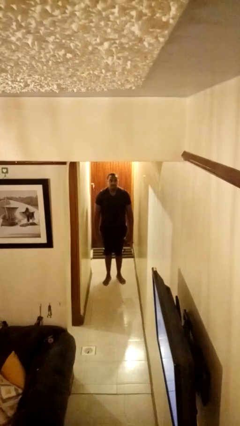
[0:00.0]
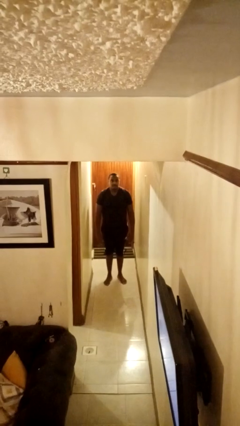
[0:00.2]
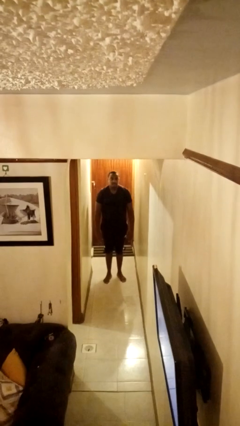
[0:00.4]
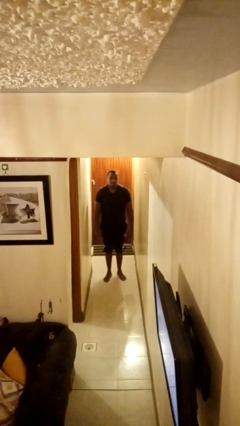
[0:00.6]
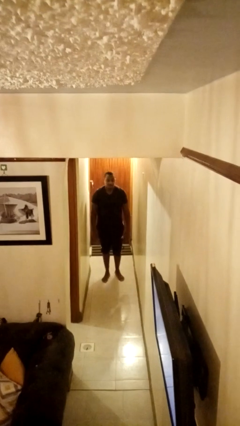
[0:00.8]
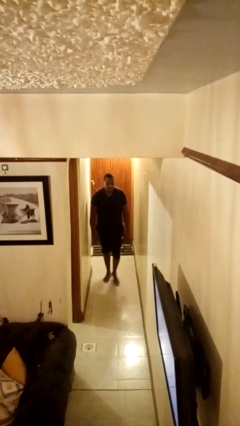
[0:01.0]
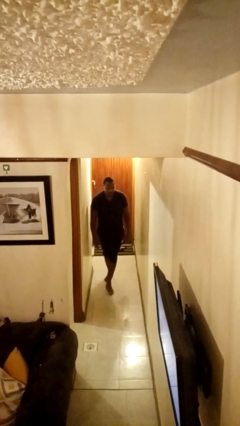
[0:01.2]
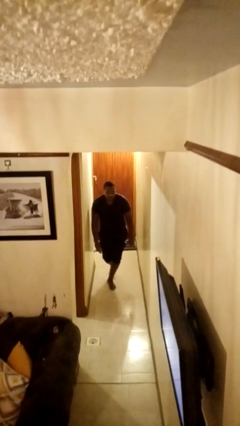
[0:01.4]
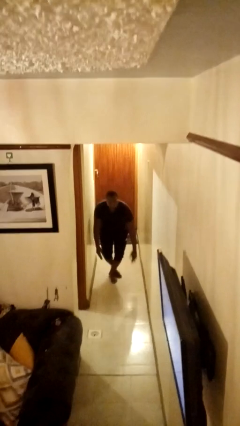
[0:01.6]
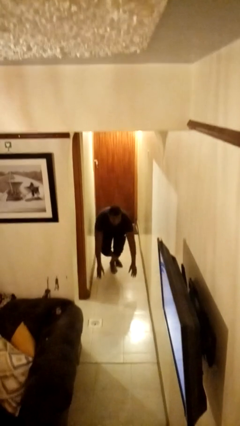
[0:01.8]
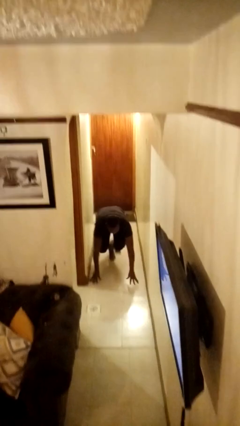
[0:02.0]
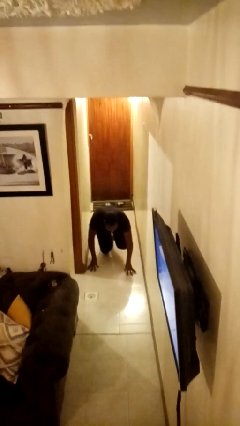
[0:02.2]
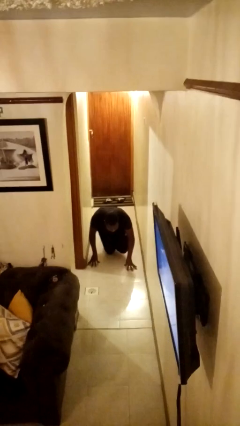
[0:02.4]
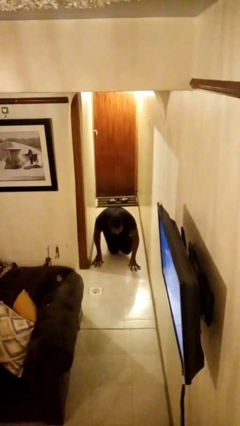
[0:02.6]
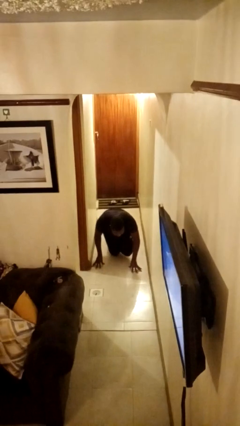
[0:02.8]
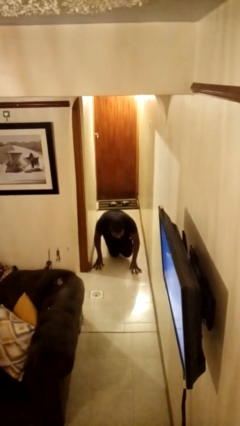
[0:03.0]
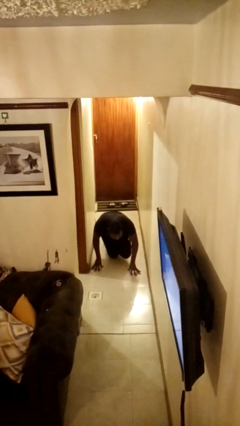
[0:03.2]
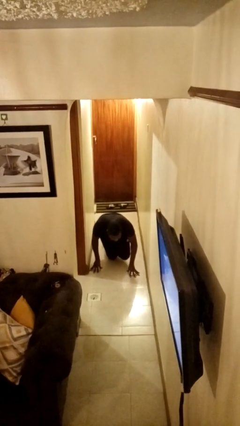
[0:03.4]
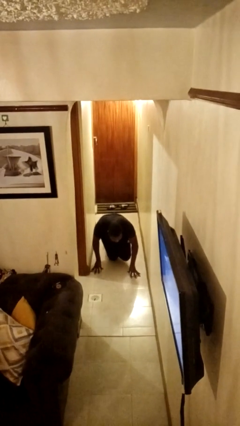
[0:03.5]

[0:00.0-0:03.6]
person trips on object on floor

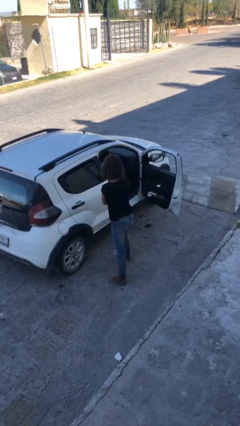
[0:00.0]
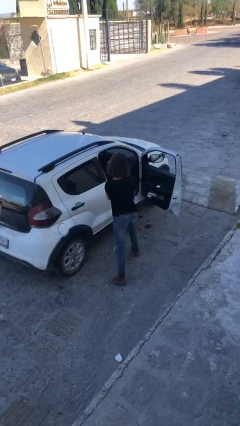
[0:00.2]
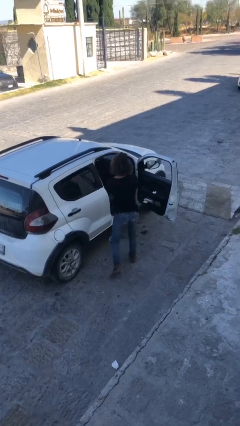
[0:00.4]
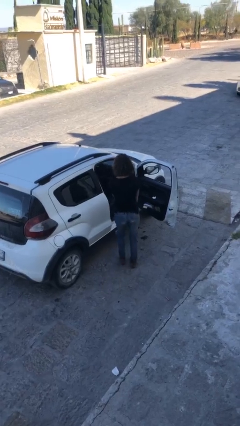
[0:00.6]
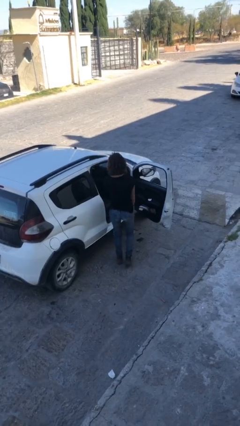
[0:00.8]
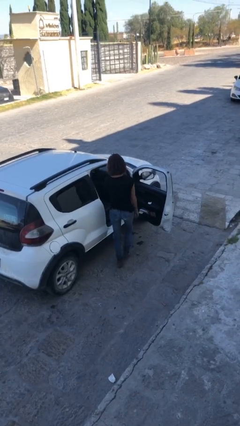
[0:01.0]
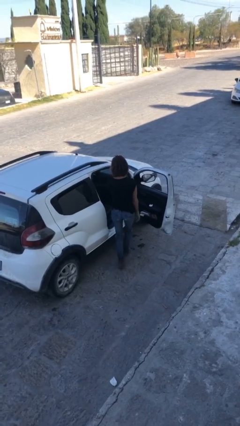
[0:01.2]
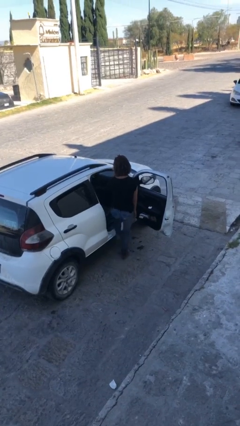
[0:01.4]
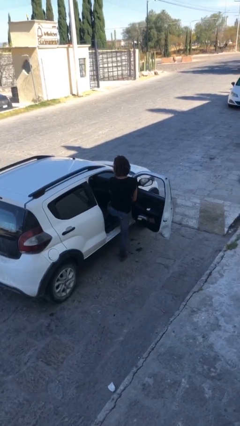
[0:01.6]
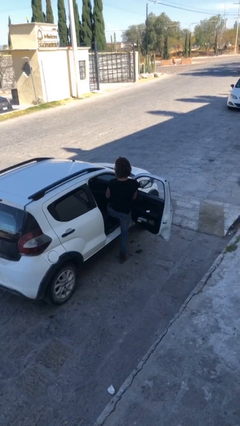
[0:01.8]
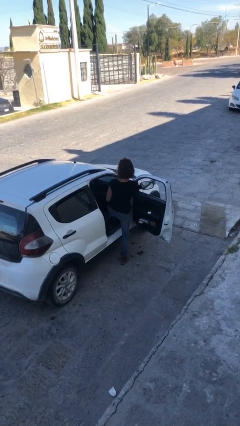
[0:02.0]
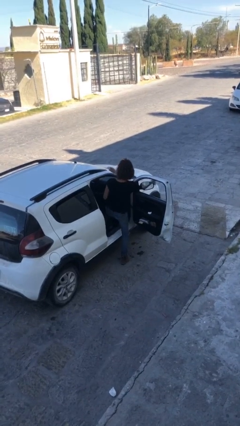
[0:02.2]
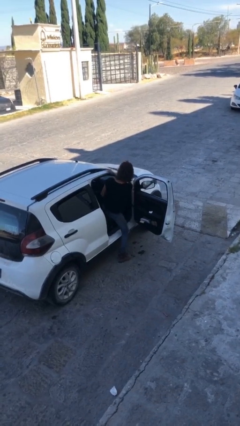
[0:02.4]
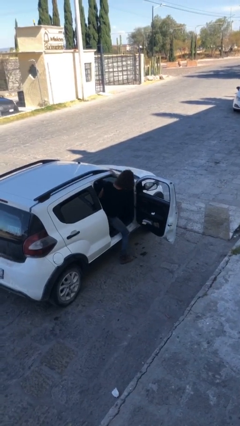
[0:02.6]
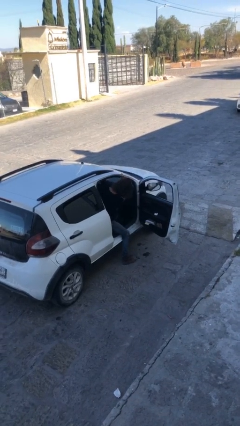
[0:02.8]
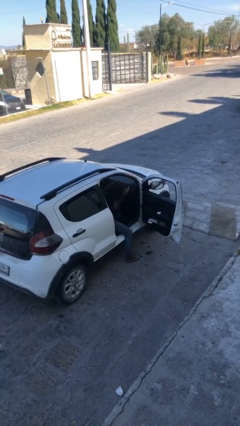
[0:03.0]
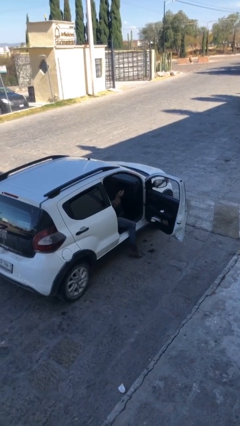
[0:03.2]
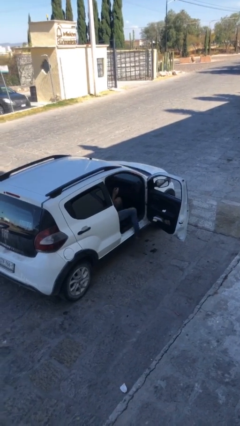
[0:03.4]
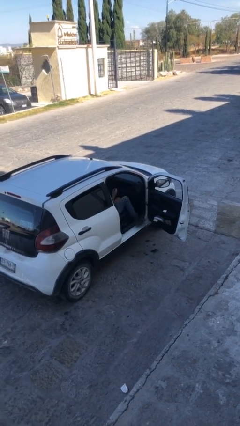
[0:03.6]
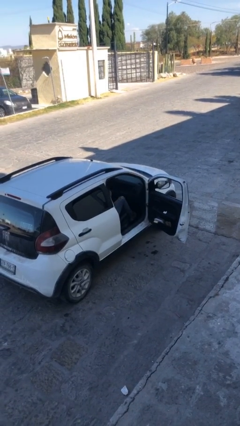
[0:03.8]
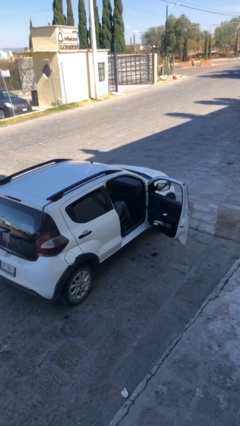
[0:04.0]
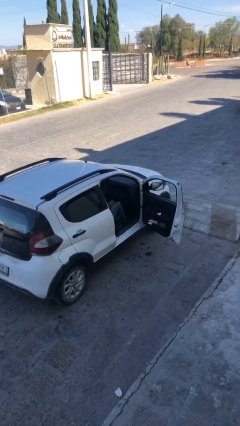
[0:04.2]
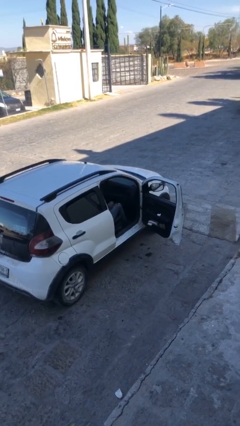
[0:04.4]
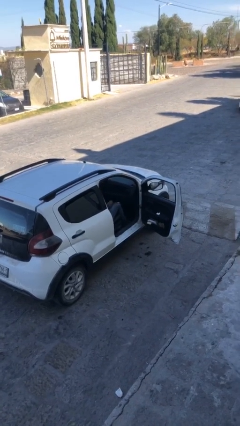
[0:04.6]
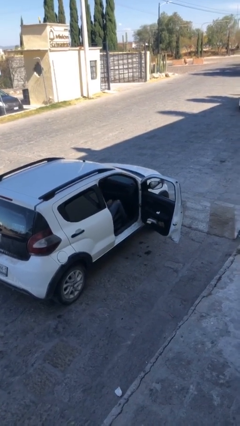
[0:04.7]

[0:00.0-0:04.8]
person enters car

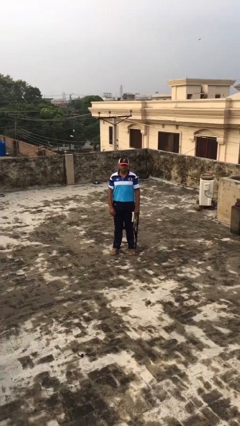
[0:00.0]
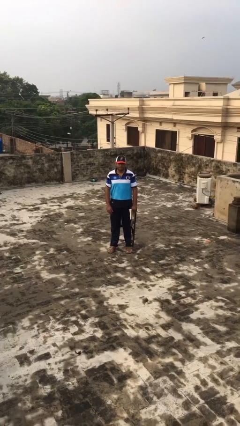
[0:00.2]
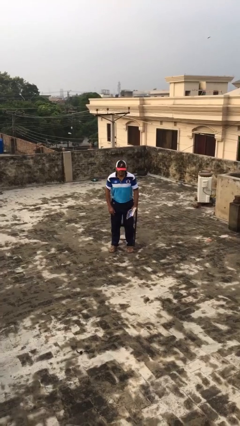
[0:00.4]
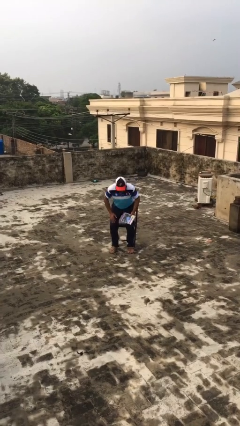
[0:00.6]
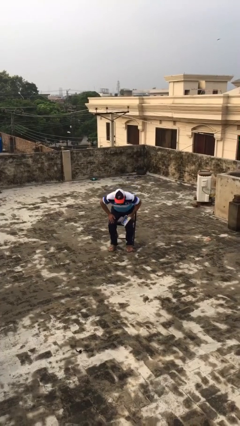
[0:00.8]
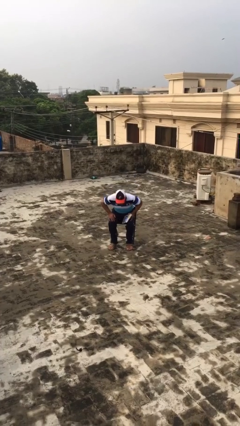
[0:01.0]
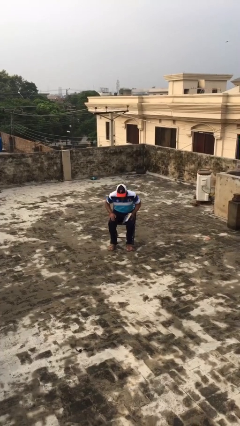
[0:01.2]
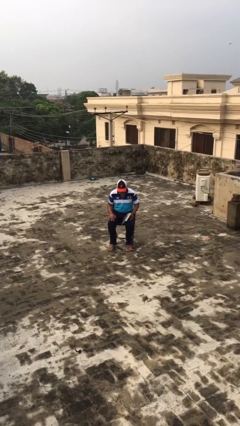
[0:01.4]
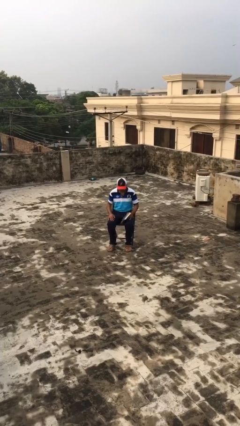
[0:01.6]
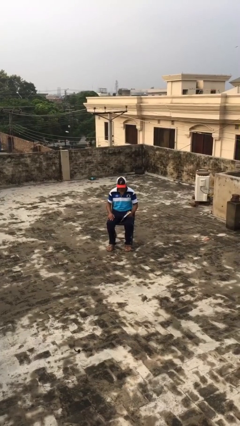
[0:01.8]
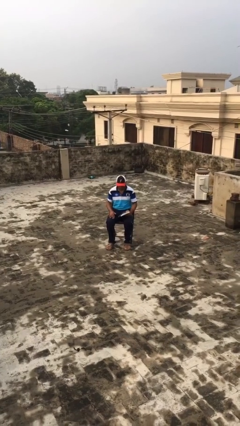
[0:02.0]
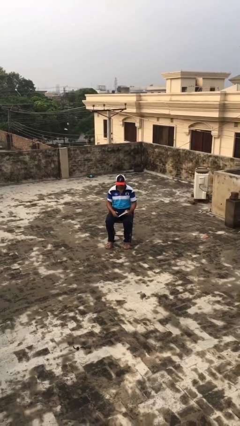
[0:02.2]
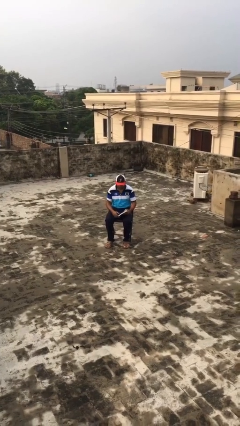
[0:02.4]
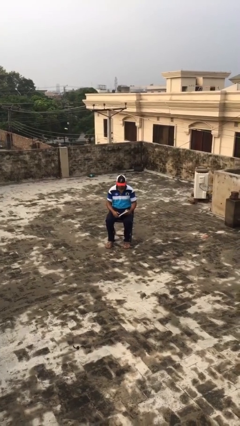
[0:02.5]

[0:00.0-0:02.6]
person sits down

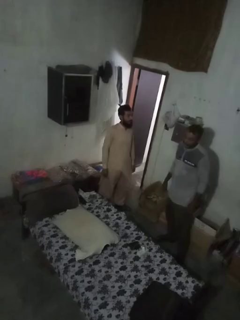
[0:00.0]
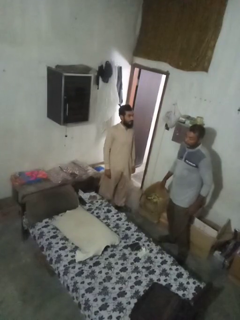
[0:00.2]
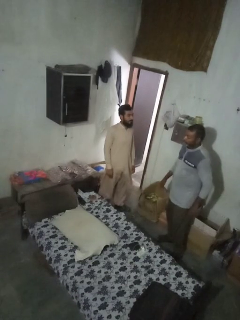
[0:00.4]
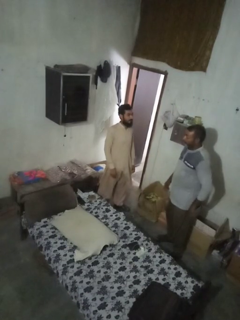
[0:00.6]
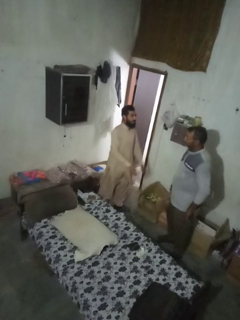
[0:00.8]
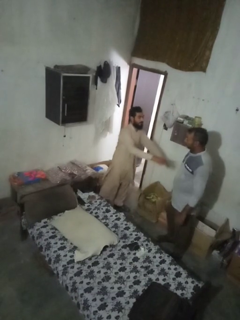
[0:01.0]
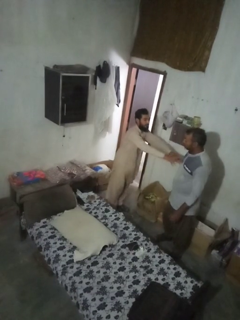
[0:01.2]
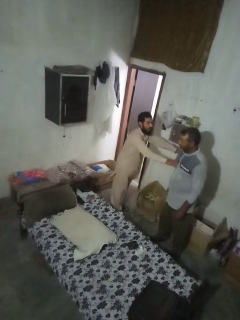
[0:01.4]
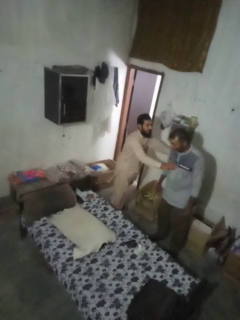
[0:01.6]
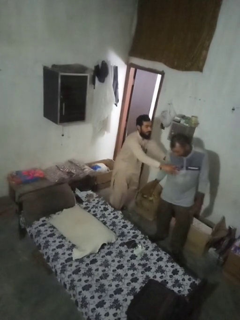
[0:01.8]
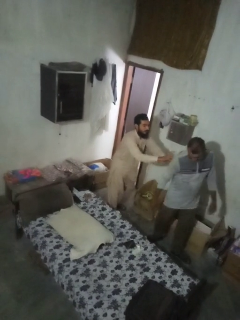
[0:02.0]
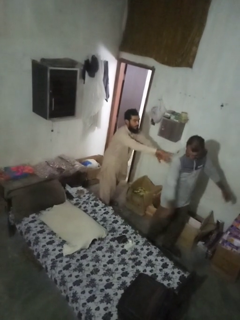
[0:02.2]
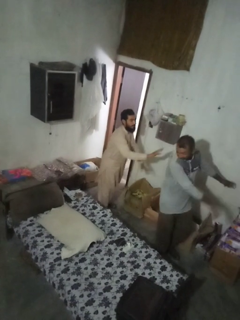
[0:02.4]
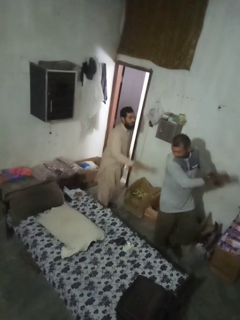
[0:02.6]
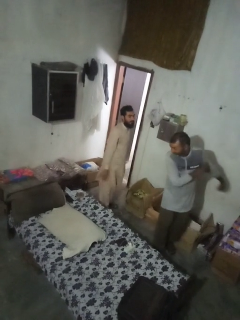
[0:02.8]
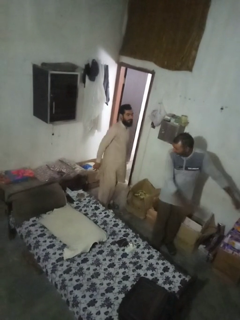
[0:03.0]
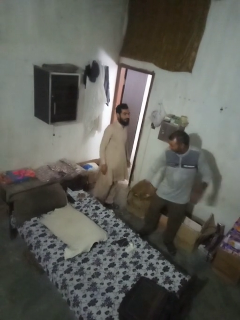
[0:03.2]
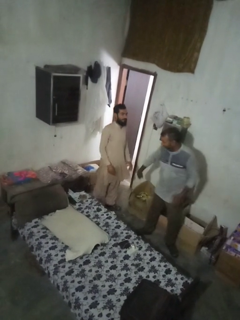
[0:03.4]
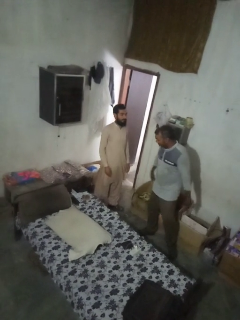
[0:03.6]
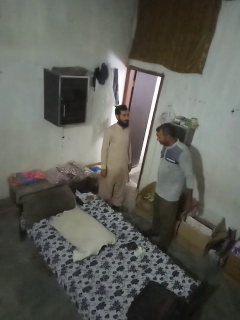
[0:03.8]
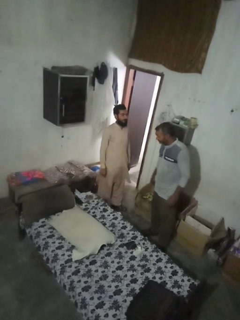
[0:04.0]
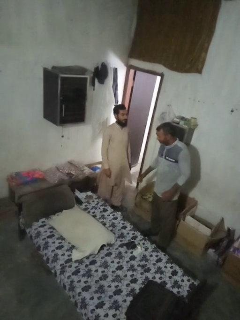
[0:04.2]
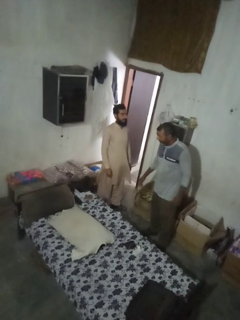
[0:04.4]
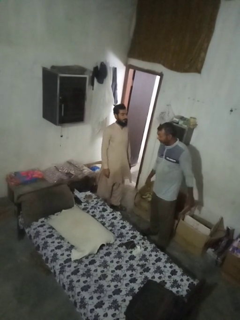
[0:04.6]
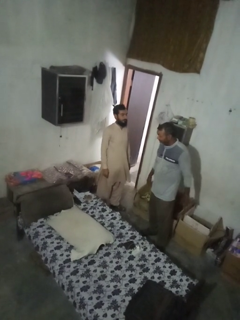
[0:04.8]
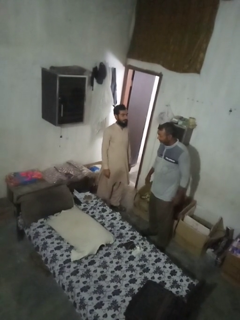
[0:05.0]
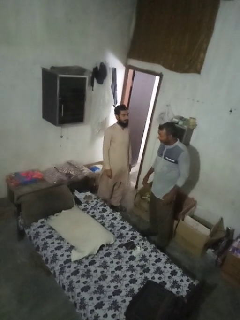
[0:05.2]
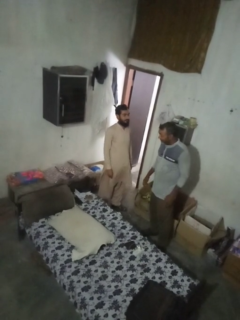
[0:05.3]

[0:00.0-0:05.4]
person shoves person

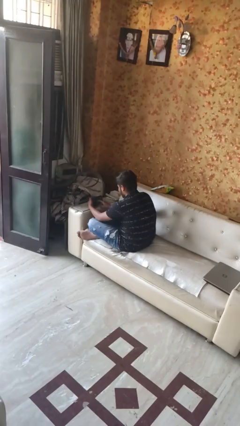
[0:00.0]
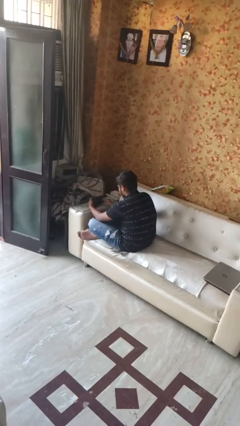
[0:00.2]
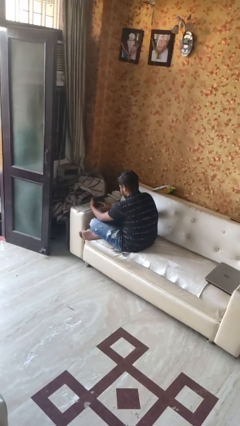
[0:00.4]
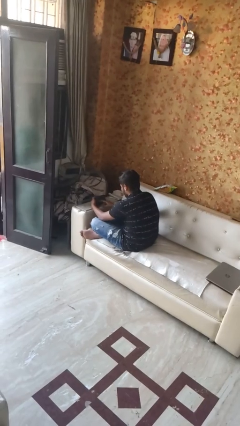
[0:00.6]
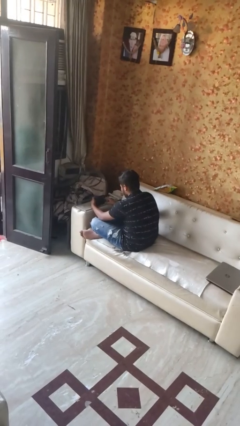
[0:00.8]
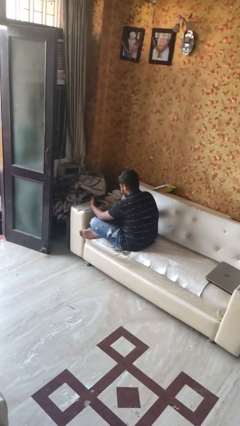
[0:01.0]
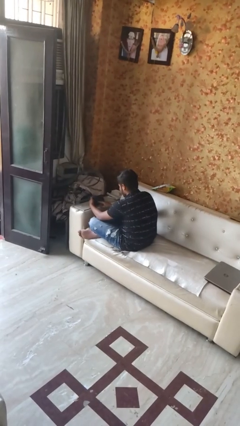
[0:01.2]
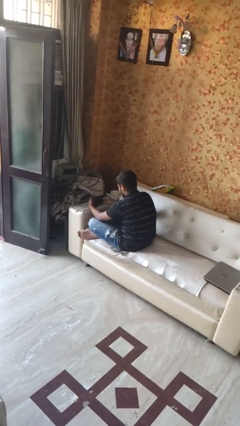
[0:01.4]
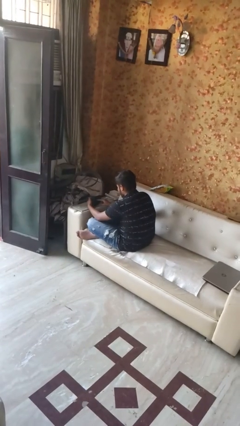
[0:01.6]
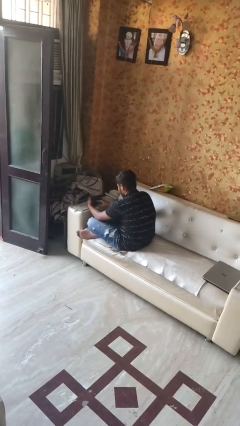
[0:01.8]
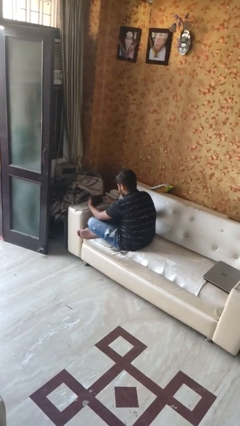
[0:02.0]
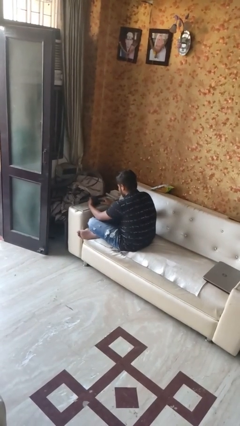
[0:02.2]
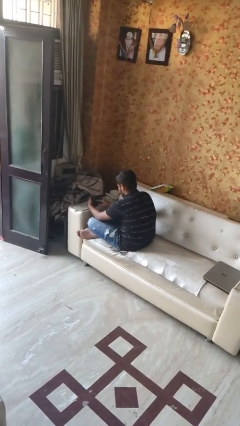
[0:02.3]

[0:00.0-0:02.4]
person interacts with tablet
